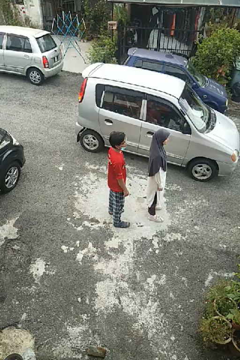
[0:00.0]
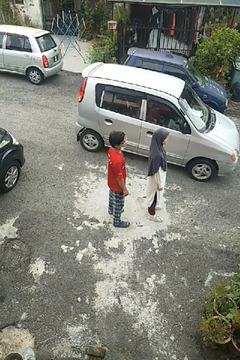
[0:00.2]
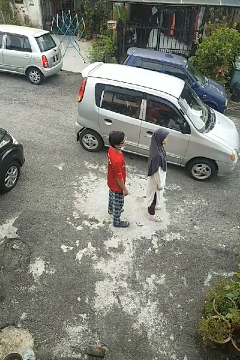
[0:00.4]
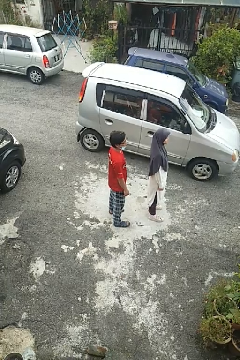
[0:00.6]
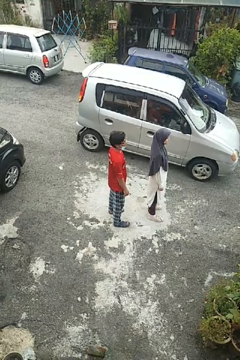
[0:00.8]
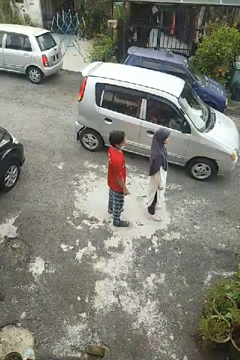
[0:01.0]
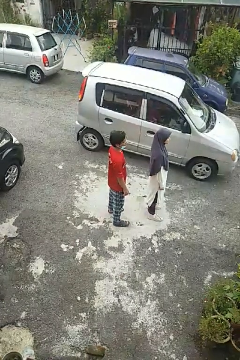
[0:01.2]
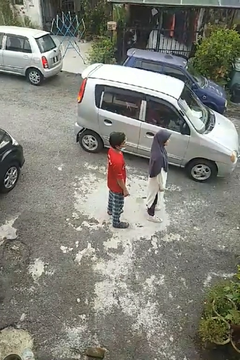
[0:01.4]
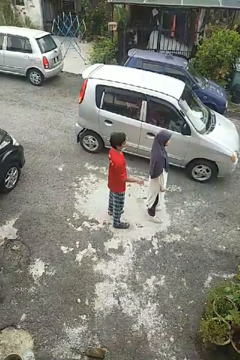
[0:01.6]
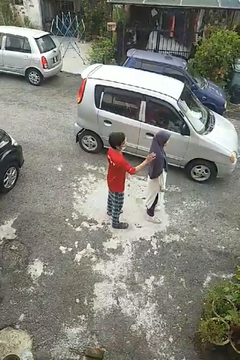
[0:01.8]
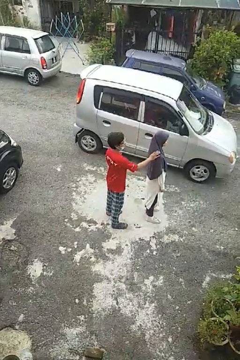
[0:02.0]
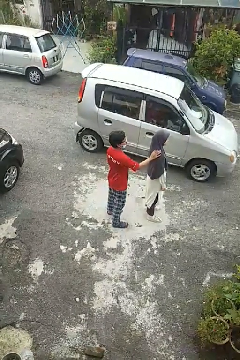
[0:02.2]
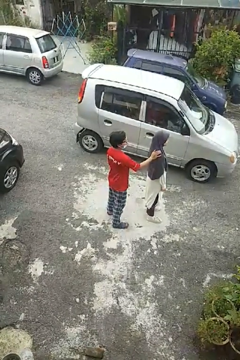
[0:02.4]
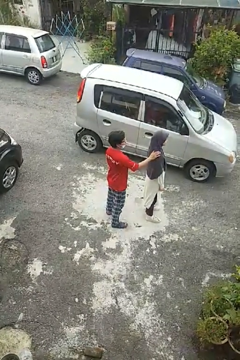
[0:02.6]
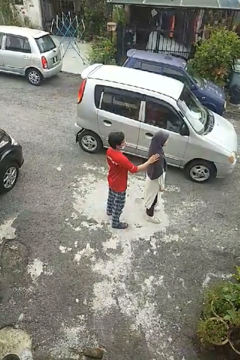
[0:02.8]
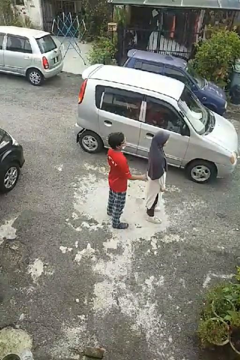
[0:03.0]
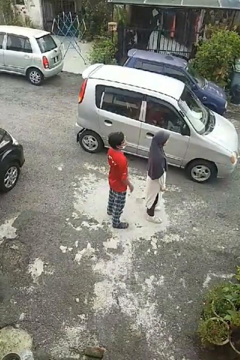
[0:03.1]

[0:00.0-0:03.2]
person touches back of person

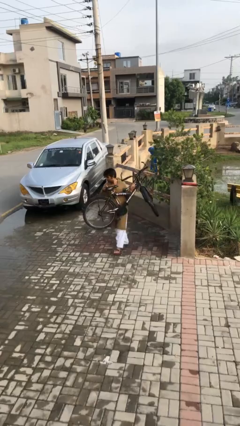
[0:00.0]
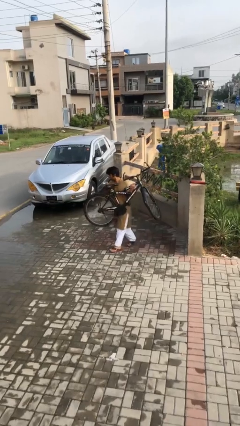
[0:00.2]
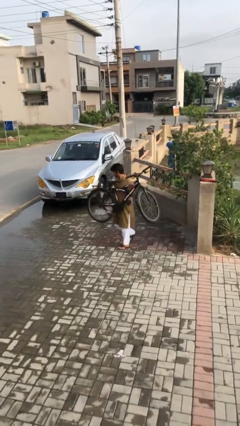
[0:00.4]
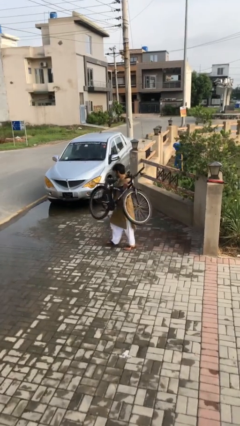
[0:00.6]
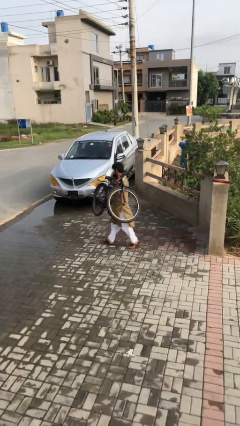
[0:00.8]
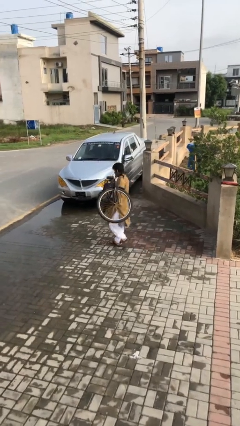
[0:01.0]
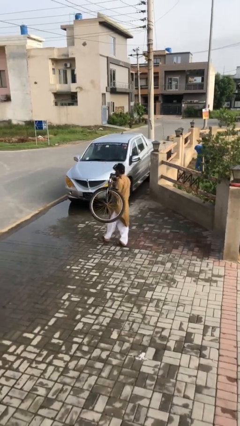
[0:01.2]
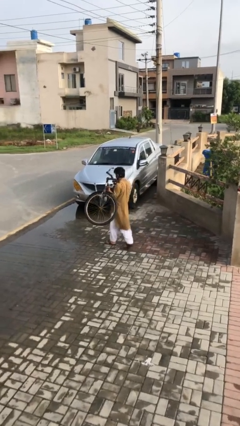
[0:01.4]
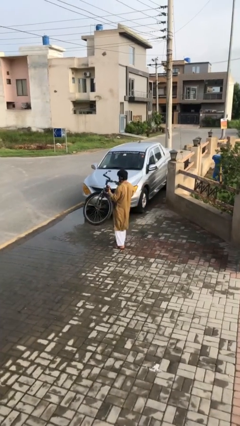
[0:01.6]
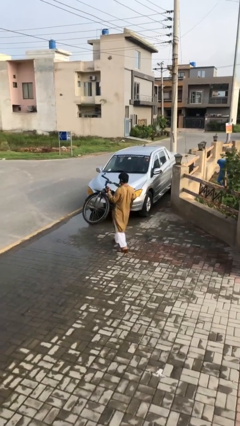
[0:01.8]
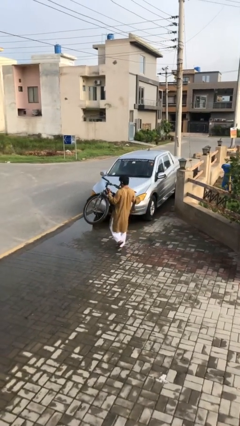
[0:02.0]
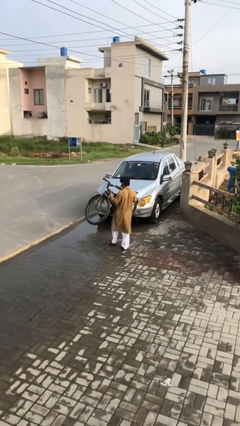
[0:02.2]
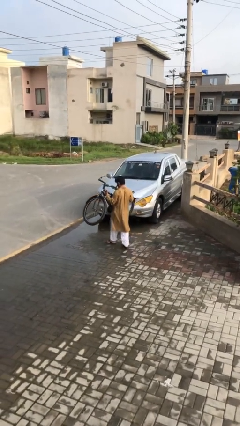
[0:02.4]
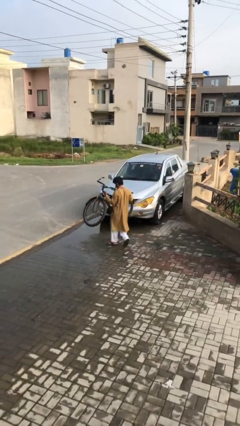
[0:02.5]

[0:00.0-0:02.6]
person carries heavy object

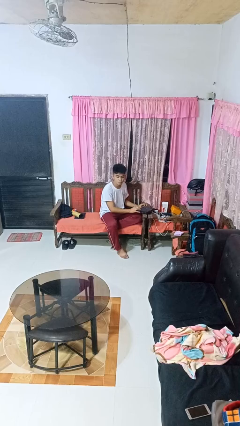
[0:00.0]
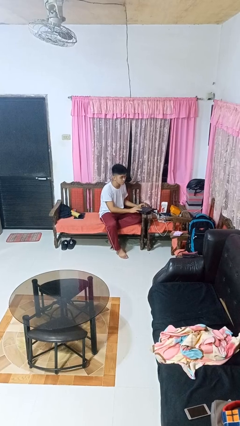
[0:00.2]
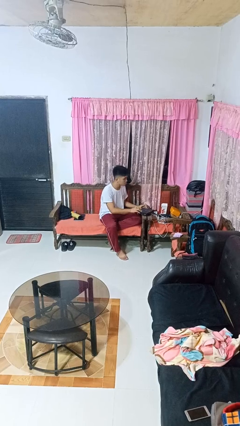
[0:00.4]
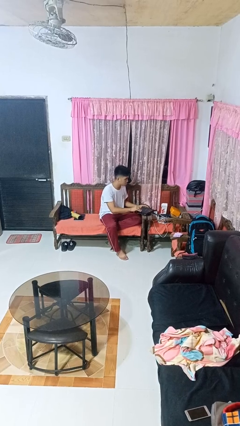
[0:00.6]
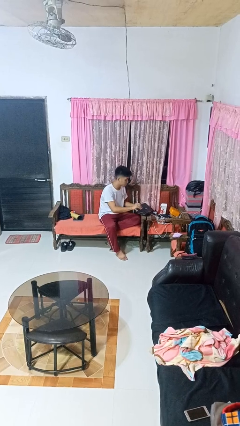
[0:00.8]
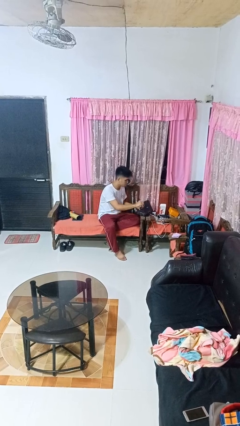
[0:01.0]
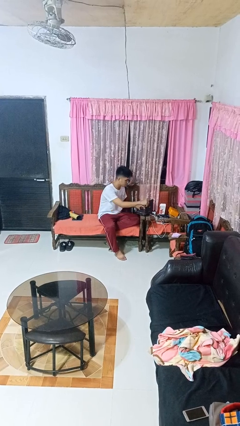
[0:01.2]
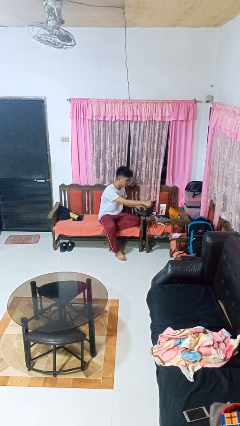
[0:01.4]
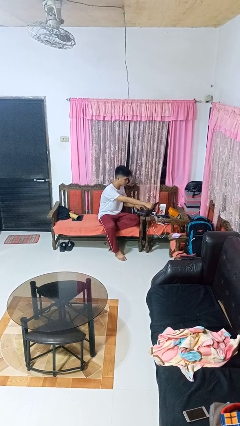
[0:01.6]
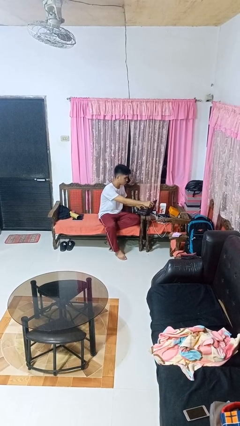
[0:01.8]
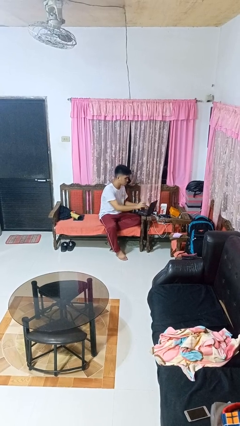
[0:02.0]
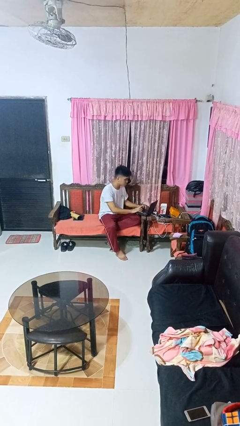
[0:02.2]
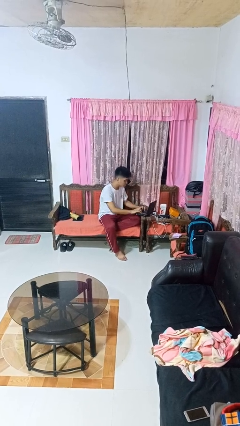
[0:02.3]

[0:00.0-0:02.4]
person opens laptop

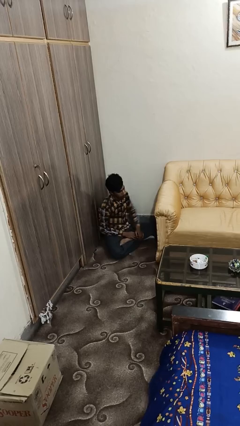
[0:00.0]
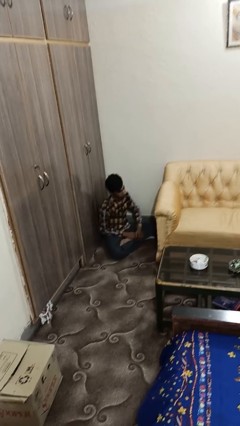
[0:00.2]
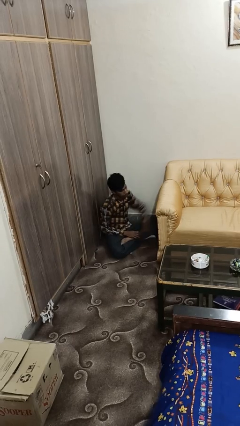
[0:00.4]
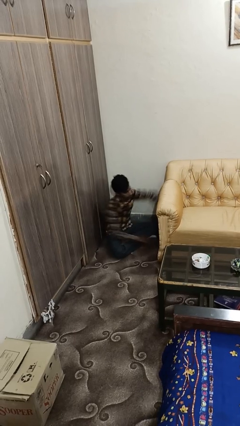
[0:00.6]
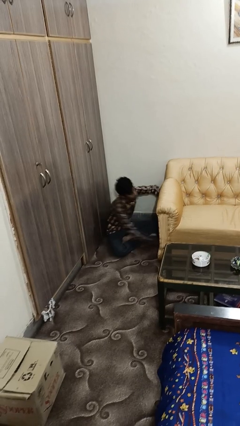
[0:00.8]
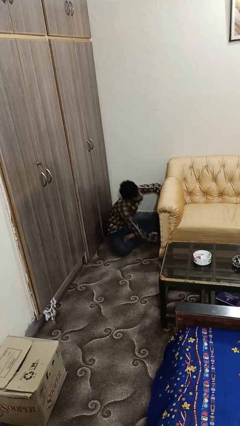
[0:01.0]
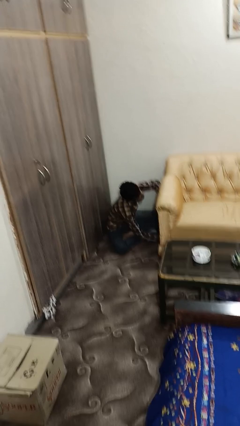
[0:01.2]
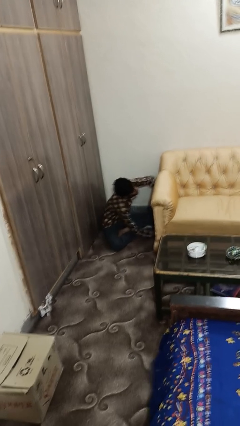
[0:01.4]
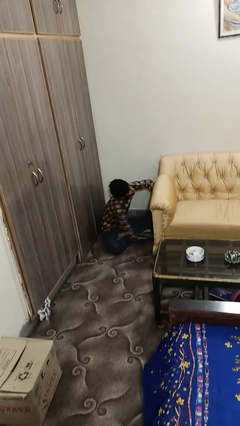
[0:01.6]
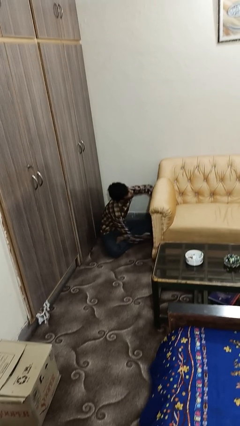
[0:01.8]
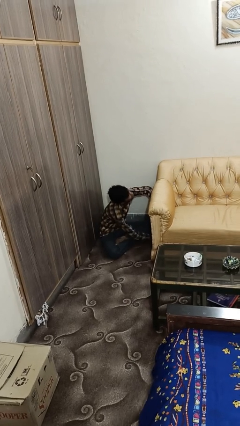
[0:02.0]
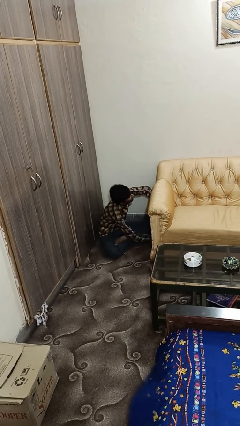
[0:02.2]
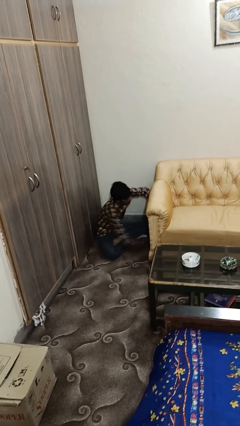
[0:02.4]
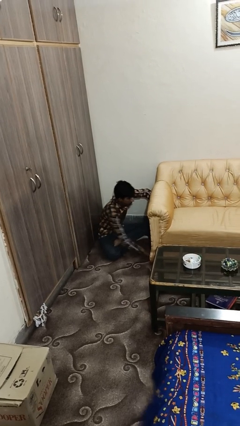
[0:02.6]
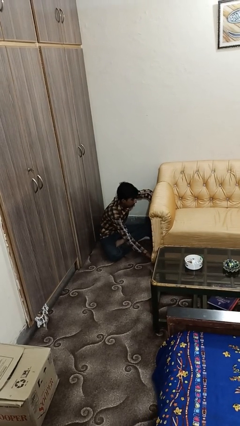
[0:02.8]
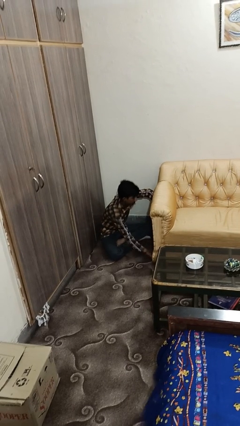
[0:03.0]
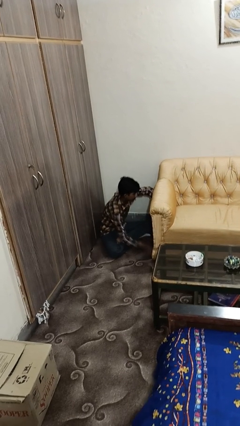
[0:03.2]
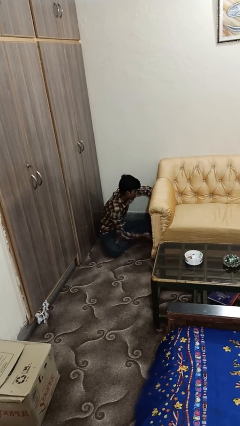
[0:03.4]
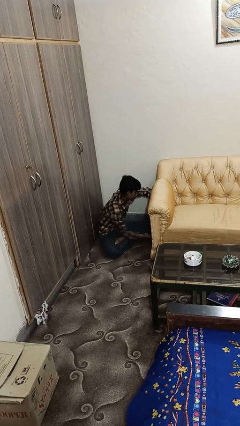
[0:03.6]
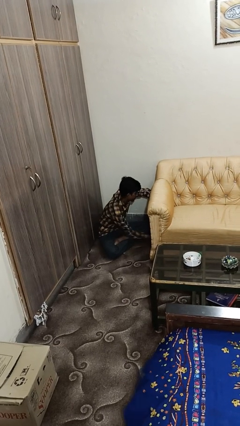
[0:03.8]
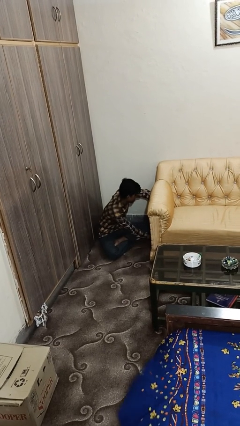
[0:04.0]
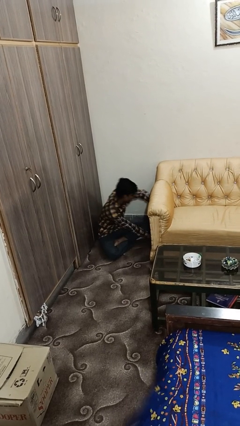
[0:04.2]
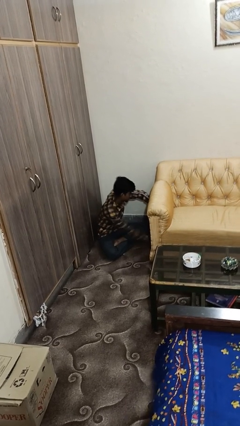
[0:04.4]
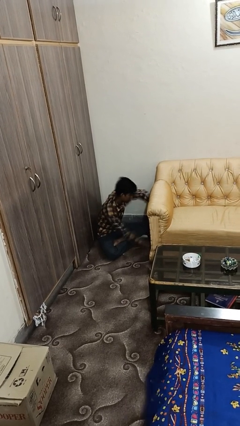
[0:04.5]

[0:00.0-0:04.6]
person searches under couch

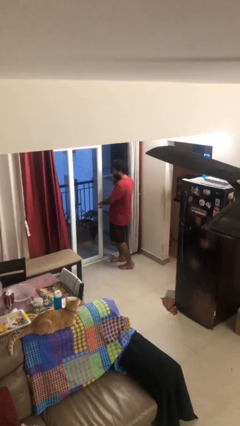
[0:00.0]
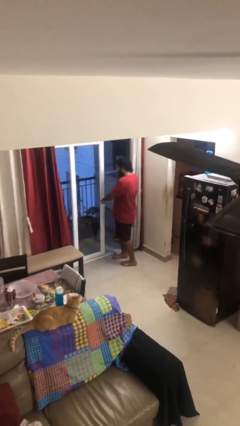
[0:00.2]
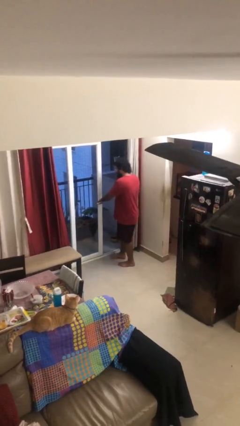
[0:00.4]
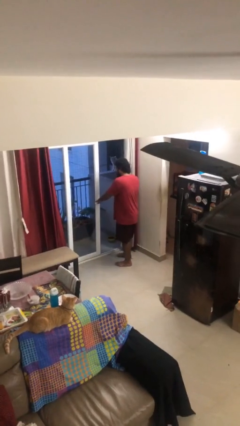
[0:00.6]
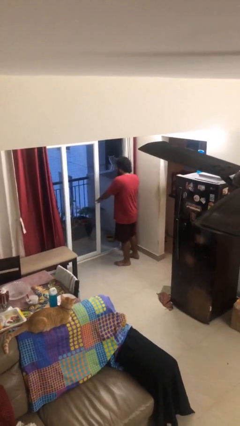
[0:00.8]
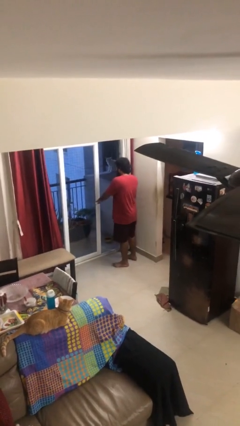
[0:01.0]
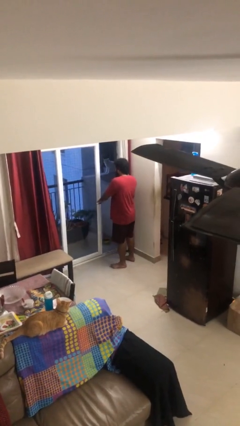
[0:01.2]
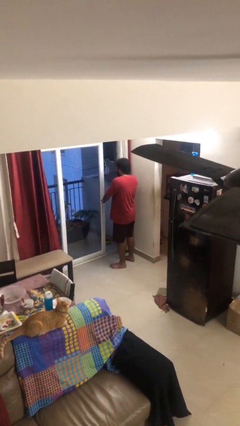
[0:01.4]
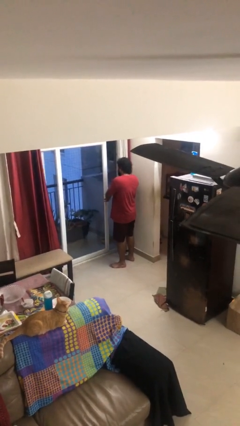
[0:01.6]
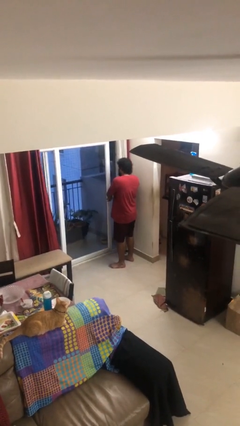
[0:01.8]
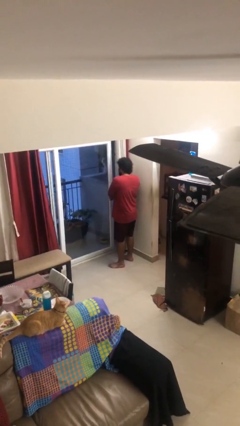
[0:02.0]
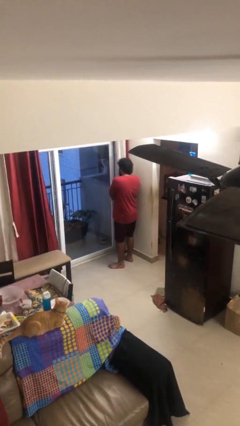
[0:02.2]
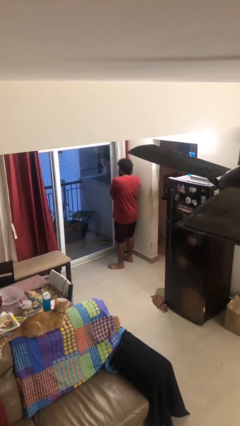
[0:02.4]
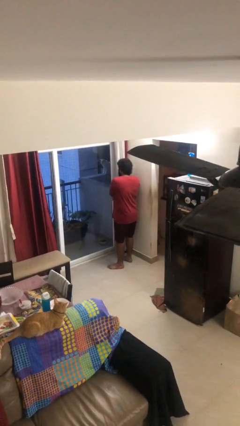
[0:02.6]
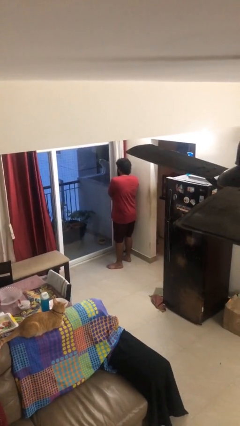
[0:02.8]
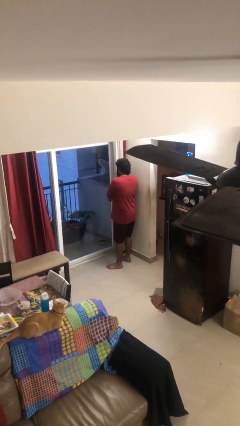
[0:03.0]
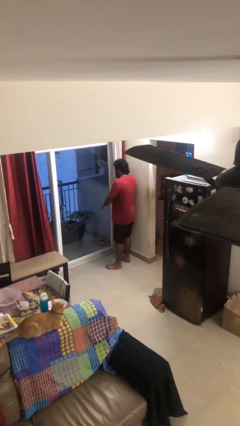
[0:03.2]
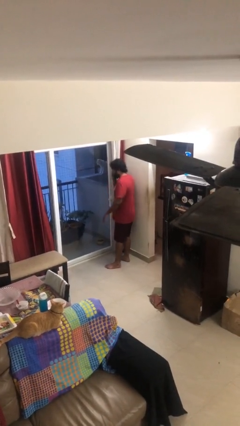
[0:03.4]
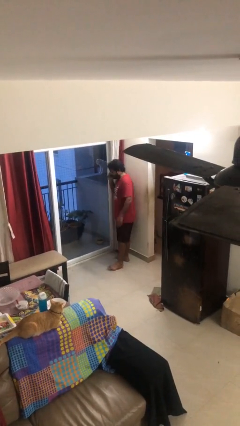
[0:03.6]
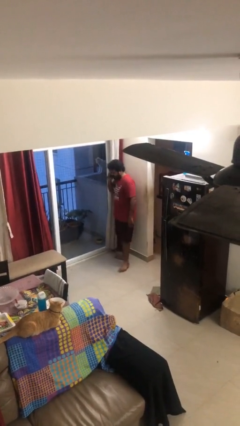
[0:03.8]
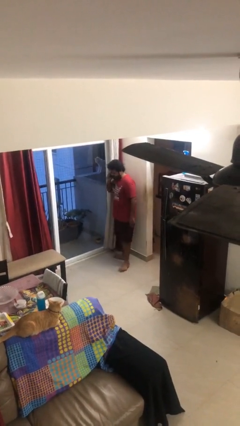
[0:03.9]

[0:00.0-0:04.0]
person closes facility door

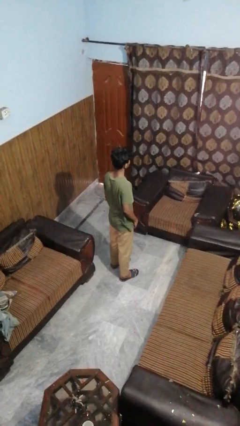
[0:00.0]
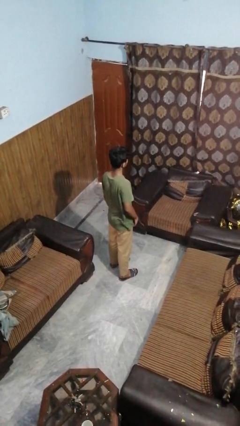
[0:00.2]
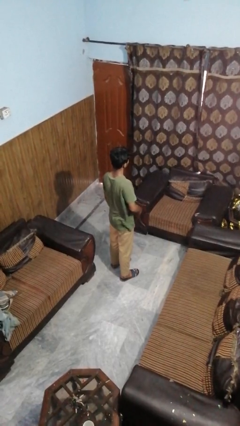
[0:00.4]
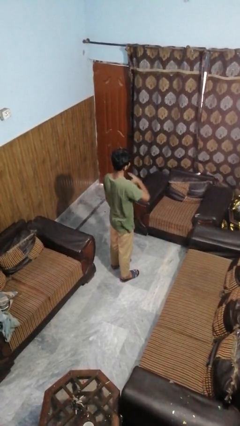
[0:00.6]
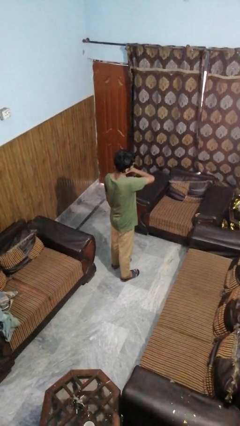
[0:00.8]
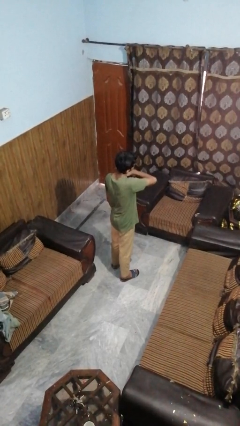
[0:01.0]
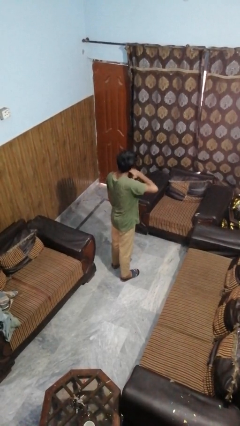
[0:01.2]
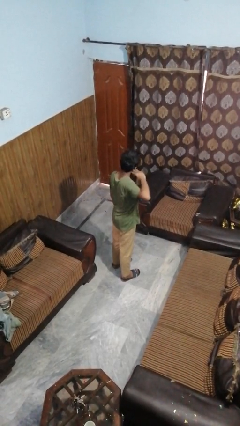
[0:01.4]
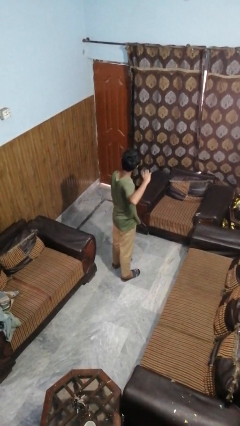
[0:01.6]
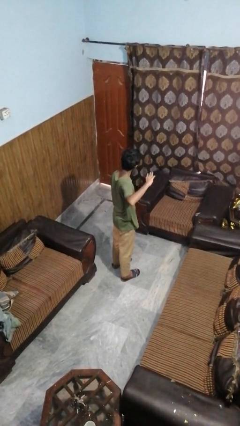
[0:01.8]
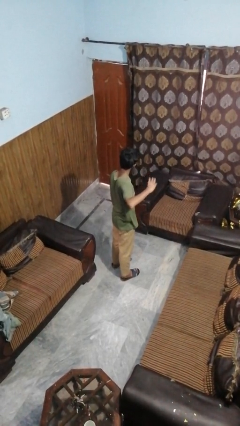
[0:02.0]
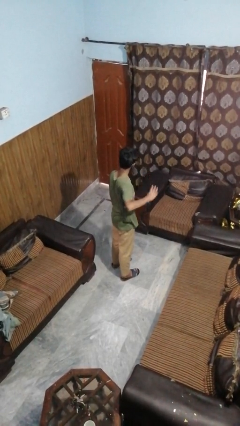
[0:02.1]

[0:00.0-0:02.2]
person gestures cut
